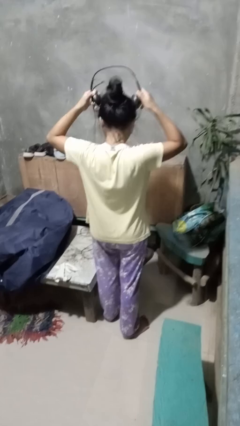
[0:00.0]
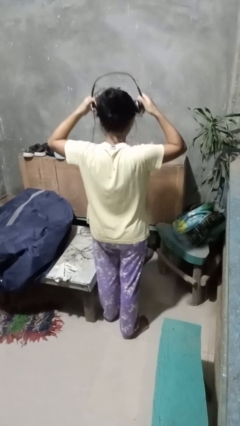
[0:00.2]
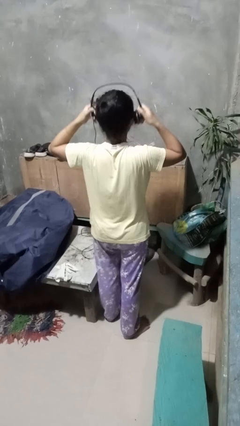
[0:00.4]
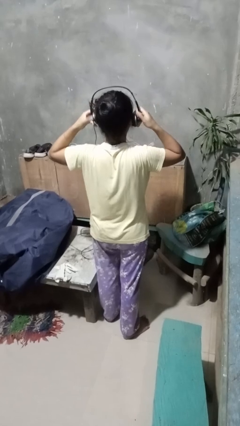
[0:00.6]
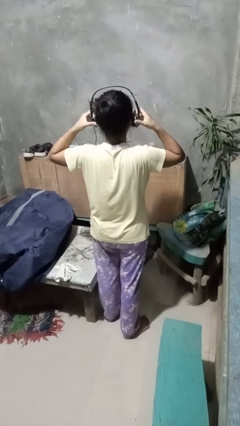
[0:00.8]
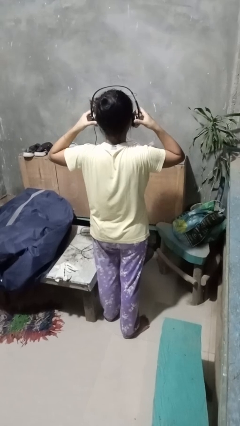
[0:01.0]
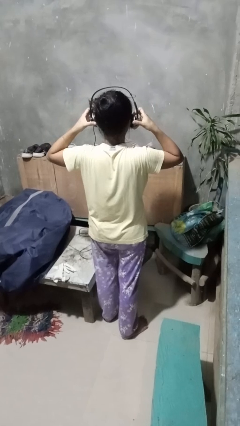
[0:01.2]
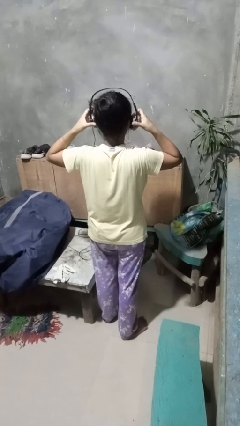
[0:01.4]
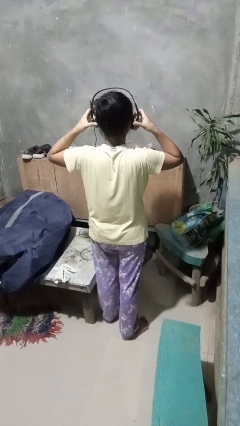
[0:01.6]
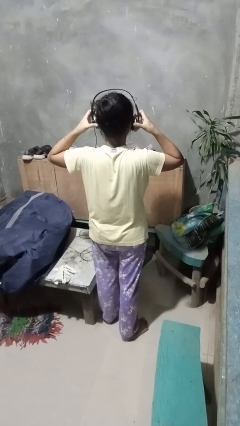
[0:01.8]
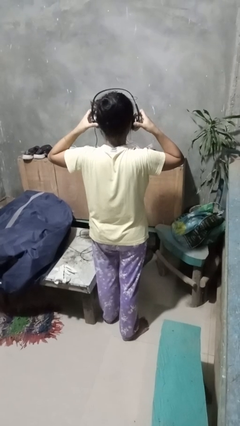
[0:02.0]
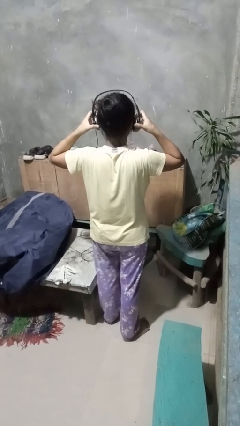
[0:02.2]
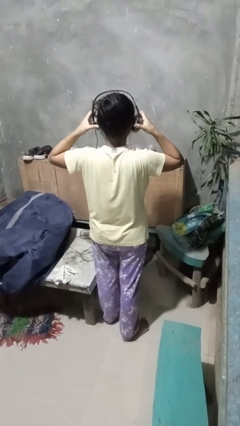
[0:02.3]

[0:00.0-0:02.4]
person puts on headphones

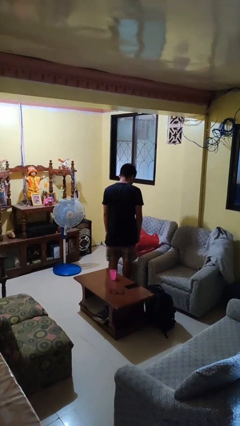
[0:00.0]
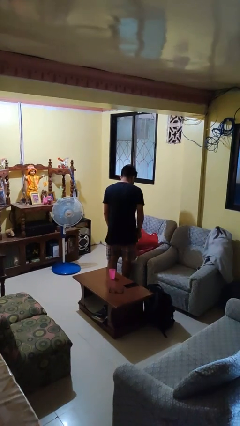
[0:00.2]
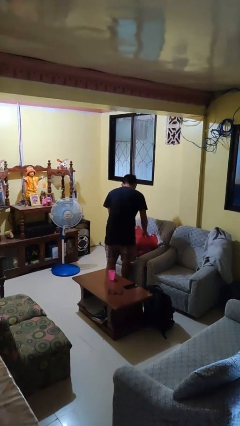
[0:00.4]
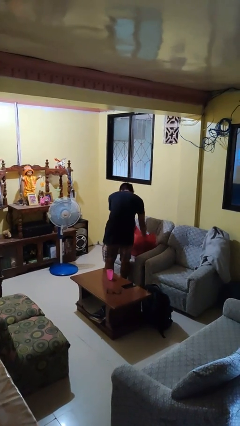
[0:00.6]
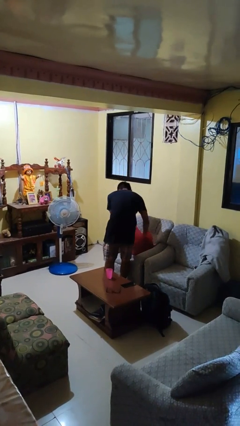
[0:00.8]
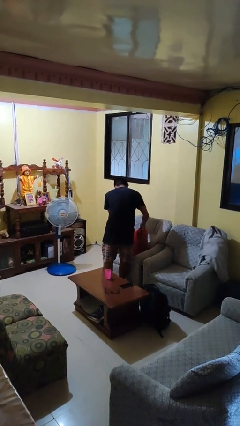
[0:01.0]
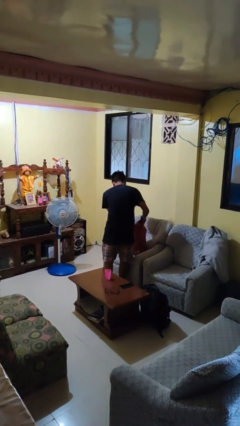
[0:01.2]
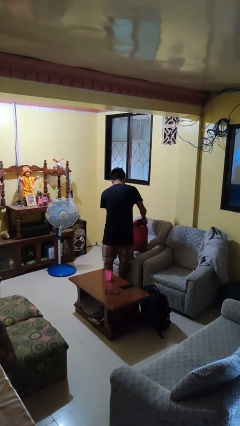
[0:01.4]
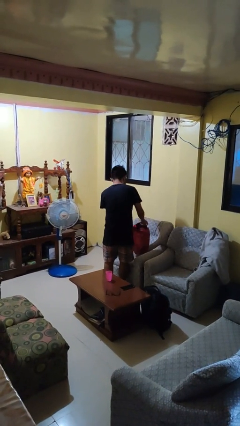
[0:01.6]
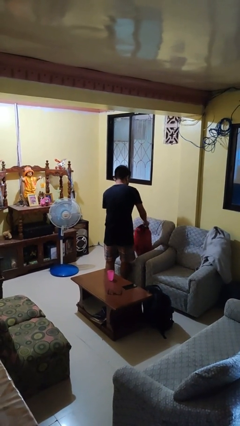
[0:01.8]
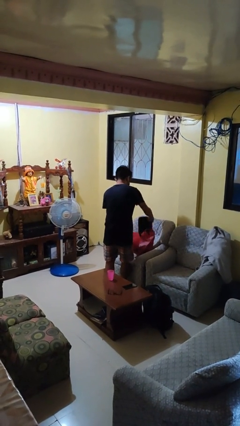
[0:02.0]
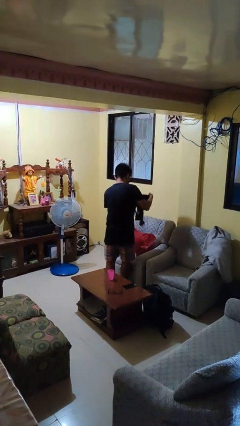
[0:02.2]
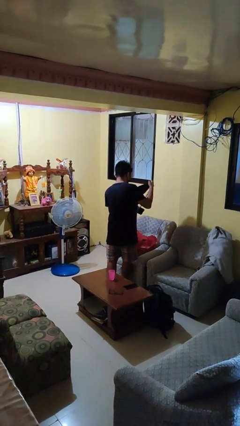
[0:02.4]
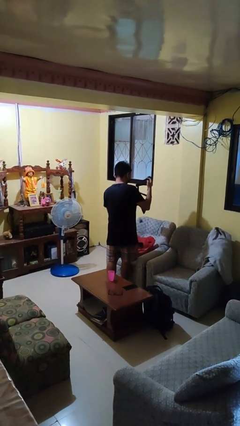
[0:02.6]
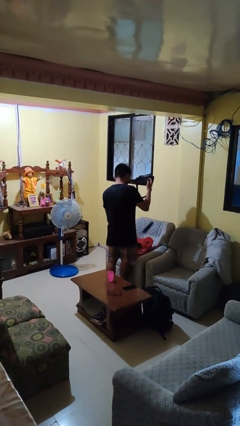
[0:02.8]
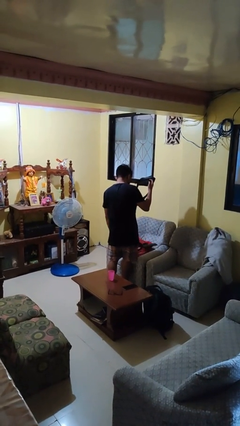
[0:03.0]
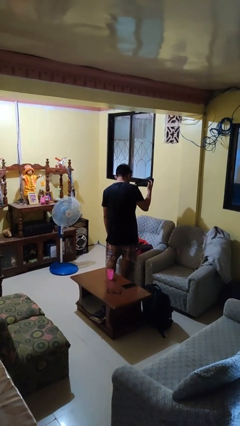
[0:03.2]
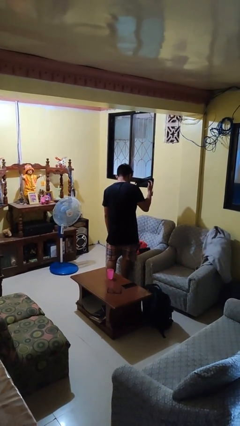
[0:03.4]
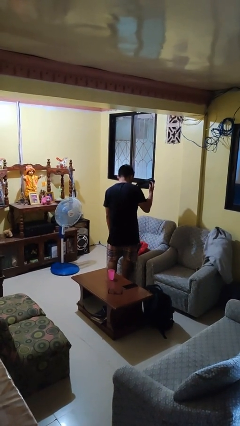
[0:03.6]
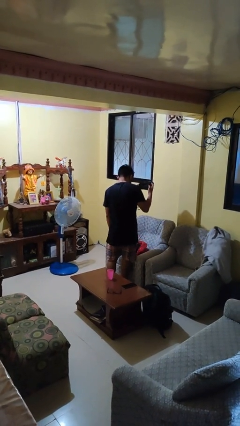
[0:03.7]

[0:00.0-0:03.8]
person takes object from bag

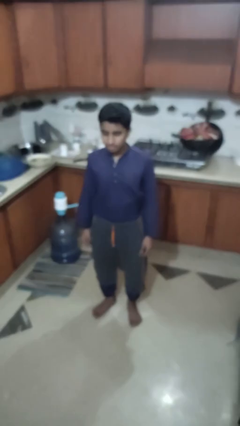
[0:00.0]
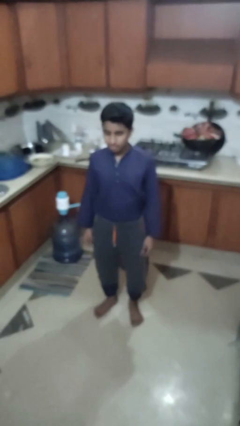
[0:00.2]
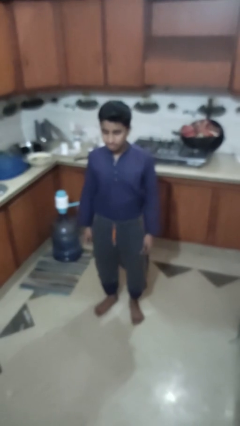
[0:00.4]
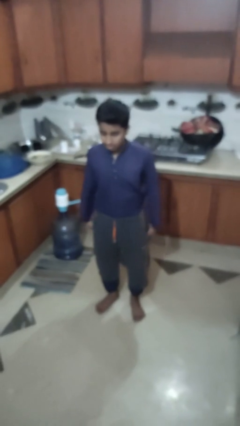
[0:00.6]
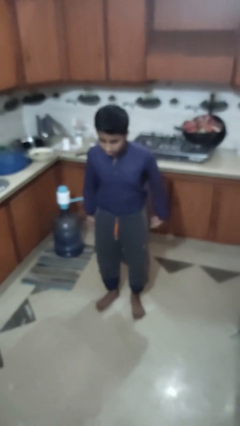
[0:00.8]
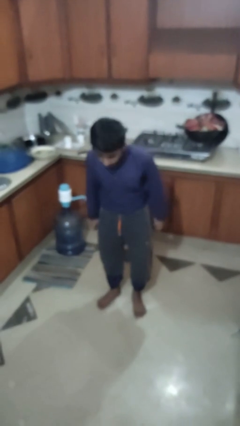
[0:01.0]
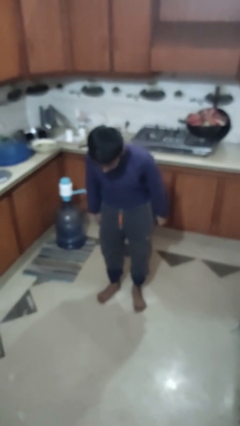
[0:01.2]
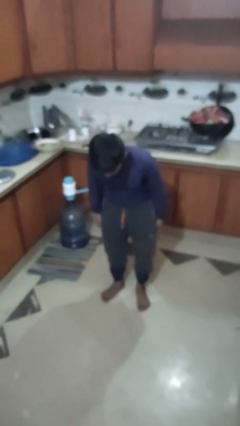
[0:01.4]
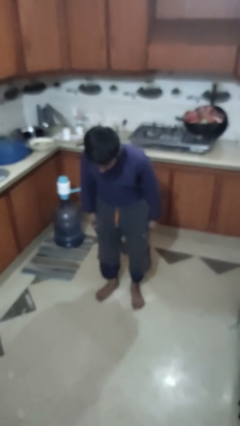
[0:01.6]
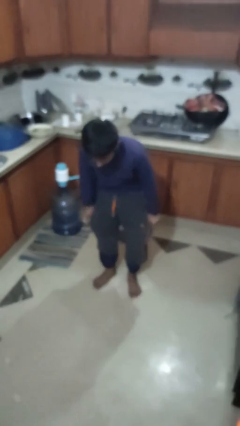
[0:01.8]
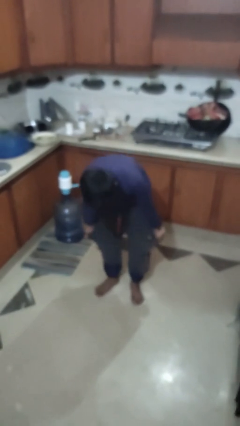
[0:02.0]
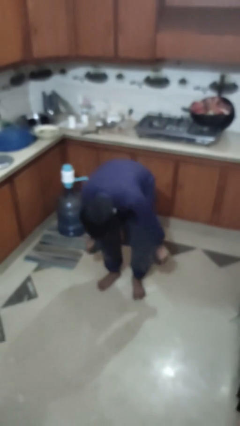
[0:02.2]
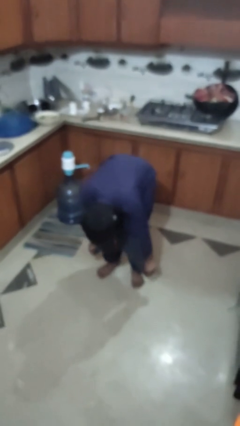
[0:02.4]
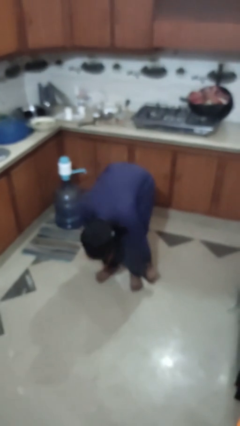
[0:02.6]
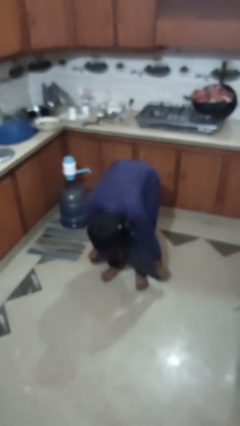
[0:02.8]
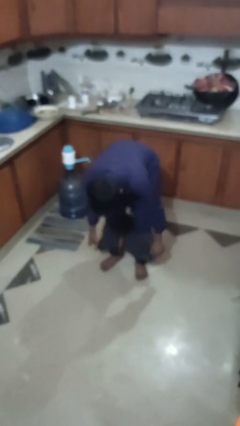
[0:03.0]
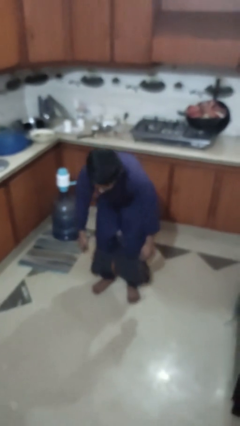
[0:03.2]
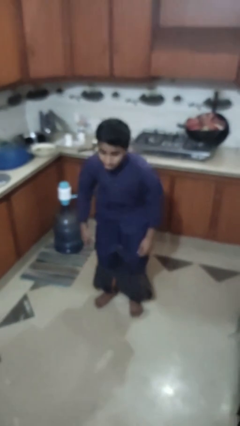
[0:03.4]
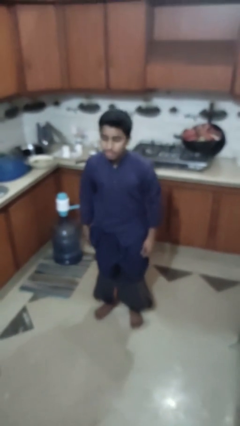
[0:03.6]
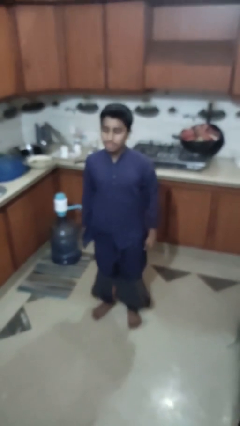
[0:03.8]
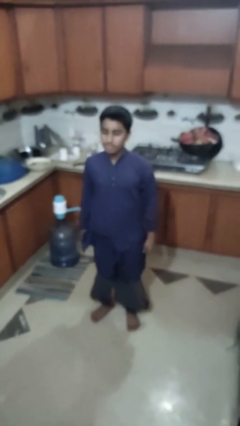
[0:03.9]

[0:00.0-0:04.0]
person takes off pants

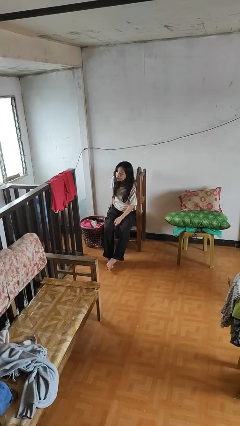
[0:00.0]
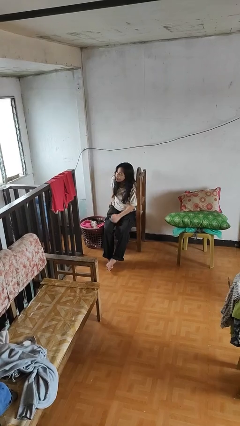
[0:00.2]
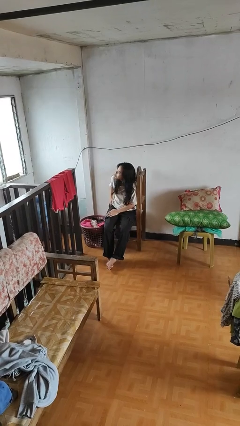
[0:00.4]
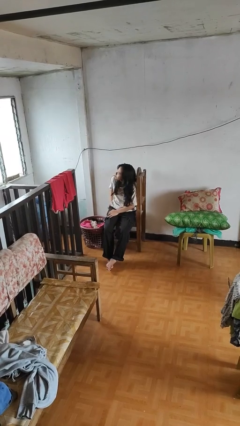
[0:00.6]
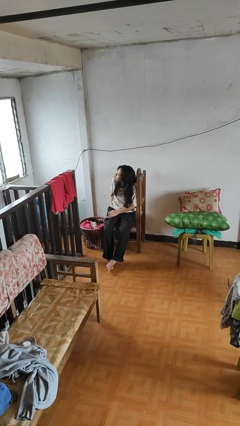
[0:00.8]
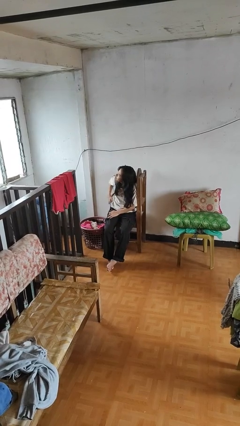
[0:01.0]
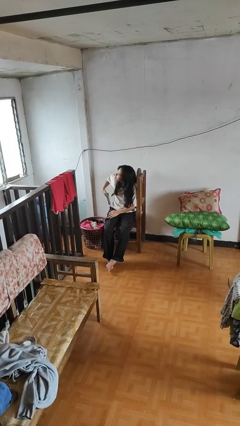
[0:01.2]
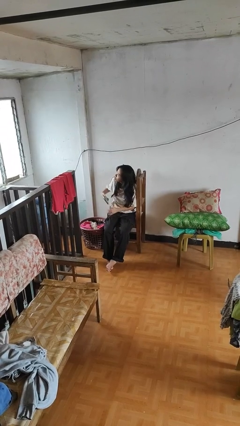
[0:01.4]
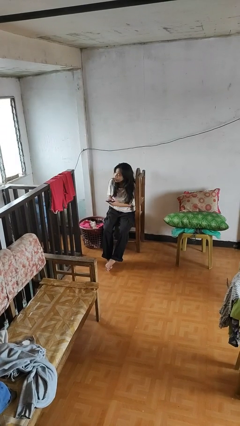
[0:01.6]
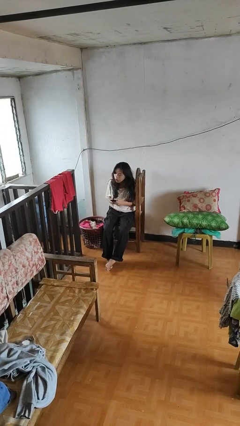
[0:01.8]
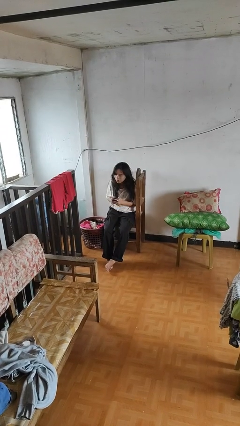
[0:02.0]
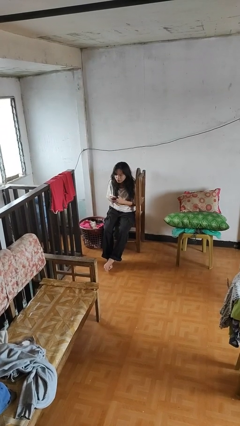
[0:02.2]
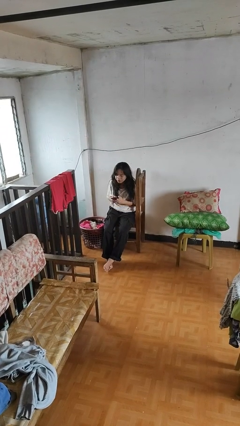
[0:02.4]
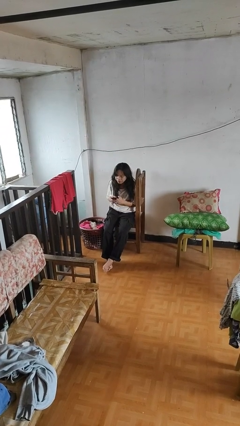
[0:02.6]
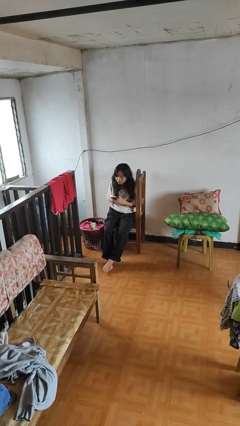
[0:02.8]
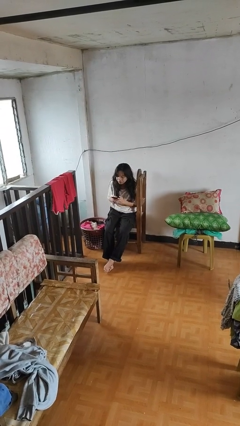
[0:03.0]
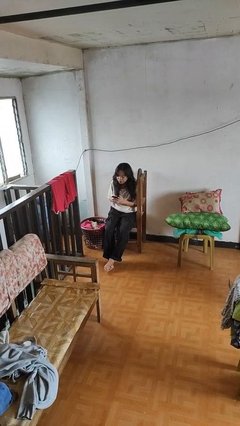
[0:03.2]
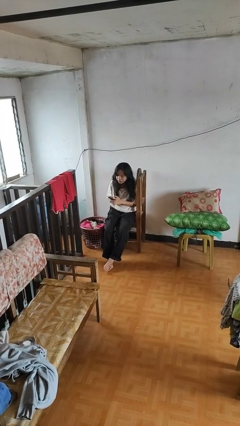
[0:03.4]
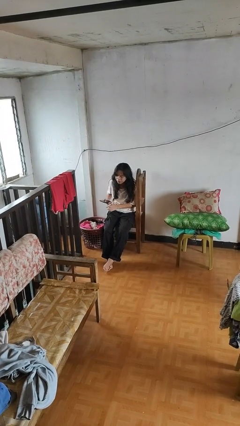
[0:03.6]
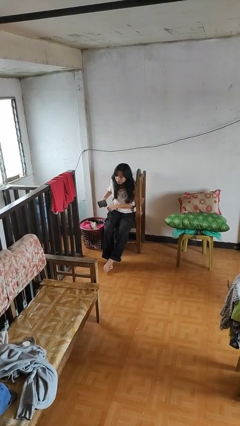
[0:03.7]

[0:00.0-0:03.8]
person takes phone from pocket

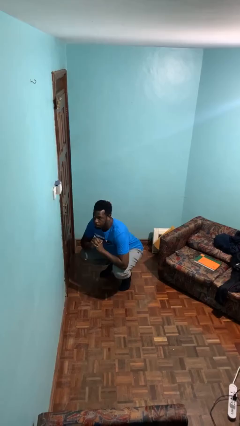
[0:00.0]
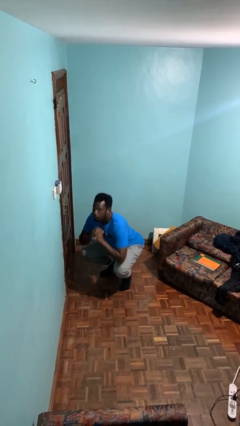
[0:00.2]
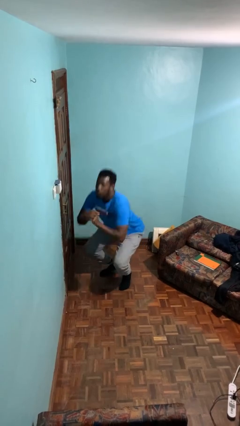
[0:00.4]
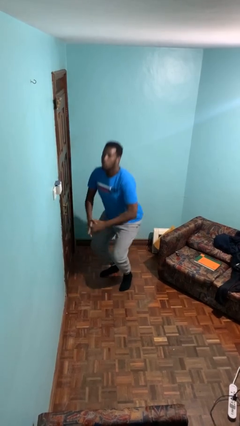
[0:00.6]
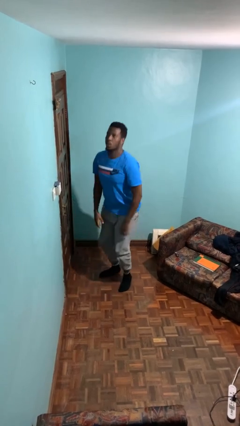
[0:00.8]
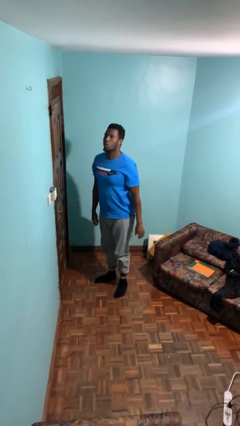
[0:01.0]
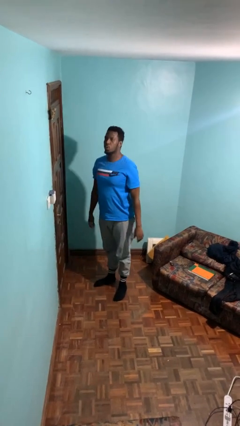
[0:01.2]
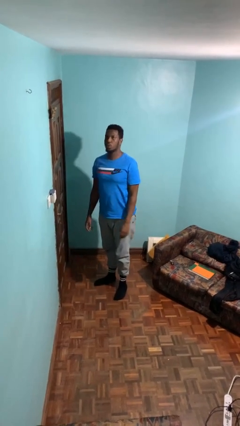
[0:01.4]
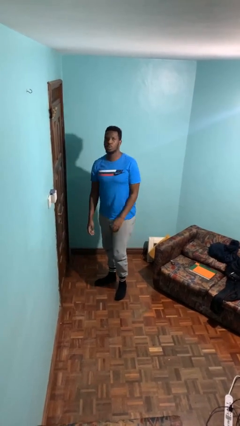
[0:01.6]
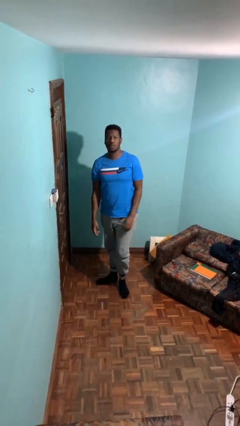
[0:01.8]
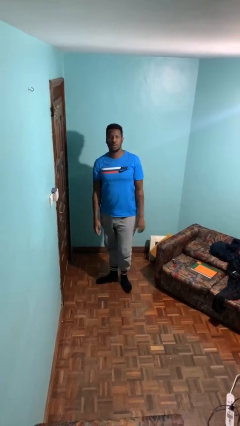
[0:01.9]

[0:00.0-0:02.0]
person stands up

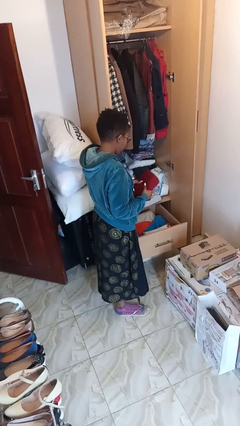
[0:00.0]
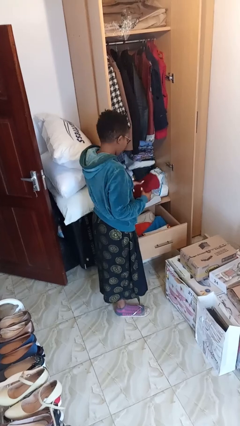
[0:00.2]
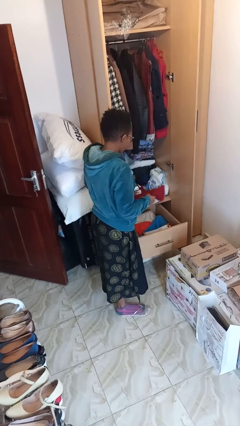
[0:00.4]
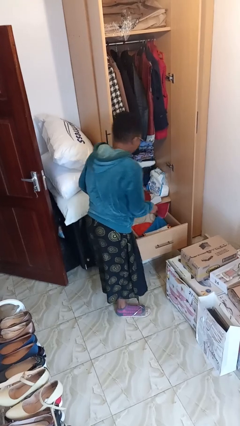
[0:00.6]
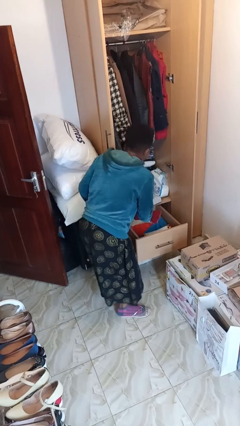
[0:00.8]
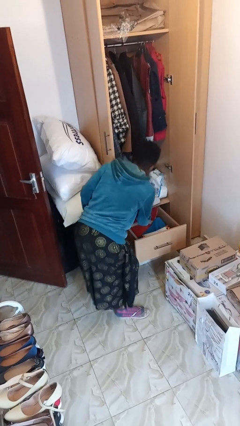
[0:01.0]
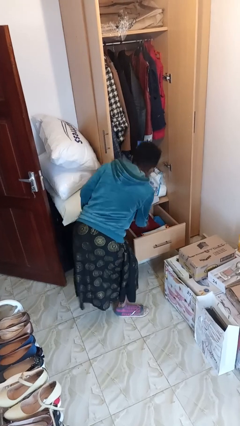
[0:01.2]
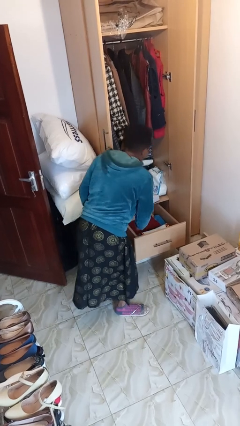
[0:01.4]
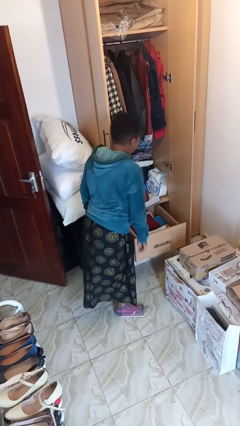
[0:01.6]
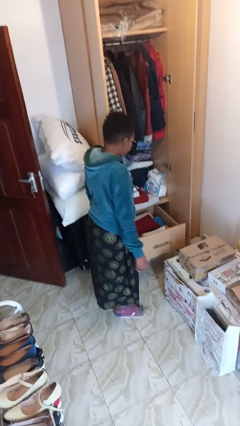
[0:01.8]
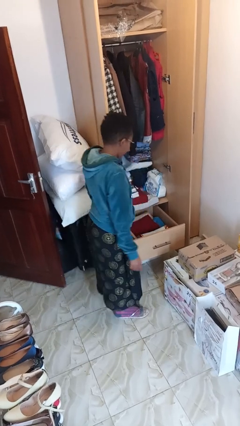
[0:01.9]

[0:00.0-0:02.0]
person puts clothes into dresser
